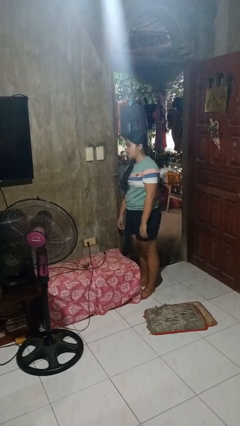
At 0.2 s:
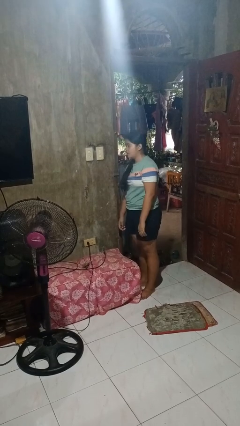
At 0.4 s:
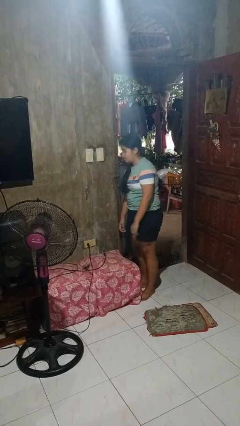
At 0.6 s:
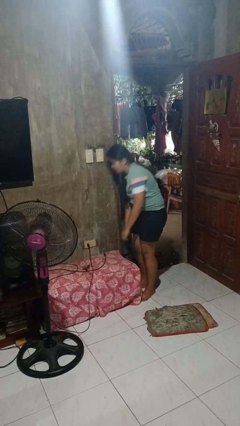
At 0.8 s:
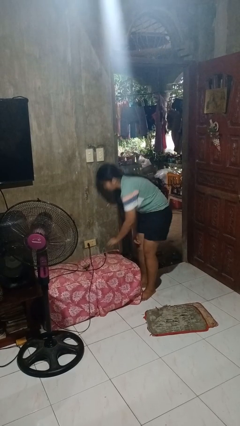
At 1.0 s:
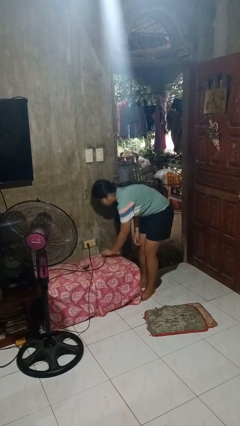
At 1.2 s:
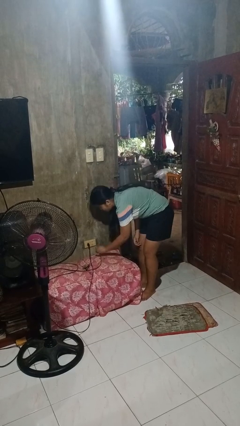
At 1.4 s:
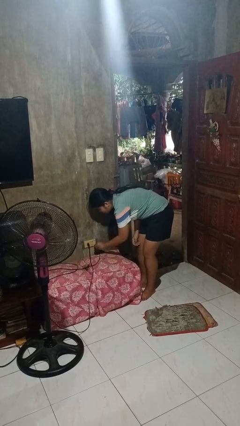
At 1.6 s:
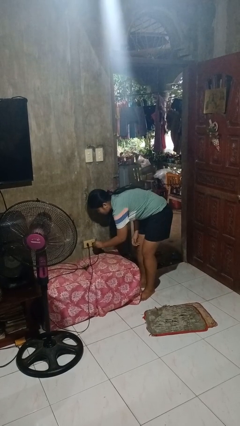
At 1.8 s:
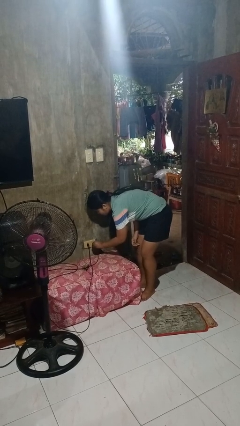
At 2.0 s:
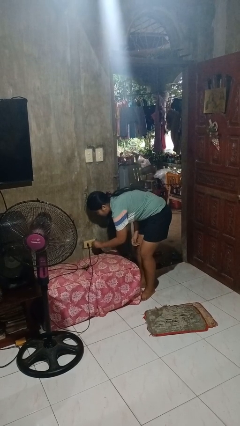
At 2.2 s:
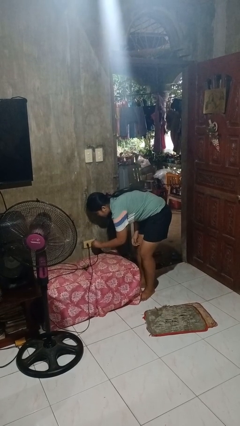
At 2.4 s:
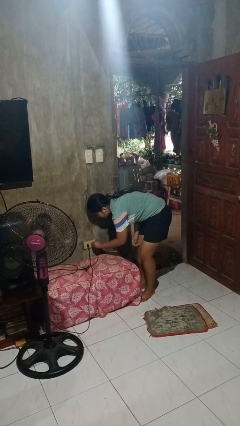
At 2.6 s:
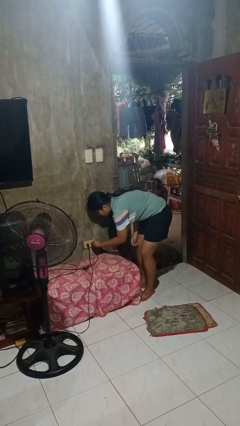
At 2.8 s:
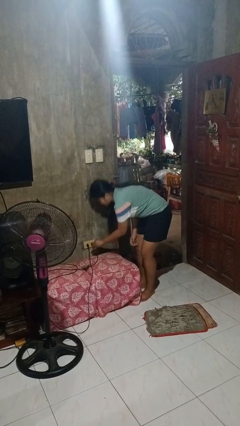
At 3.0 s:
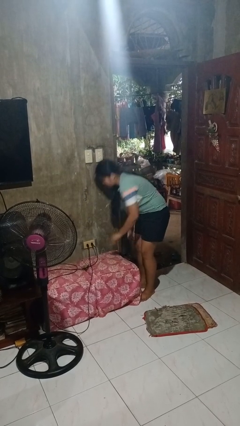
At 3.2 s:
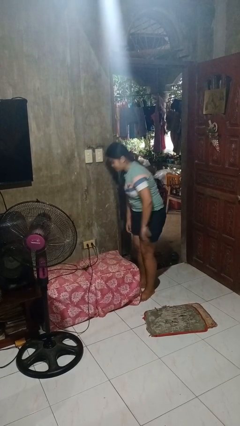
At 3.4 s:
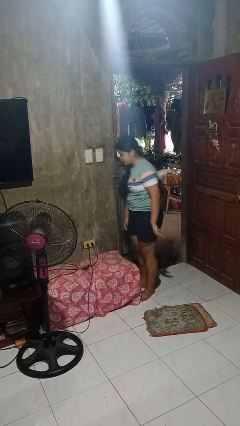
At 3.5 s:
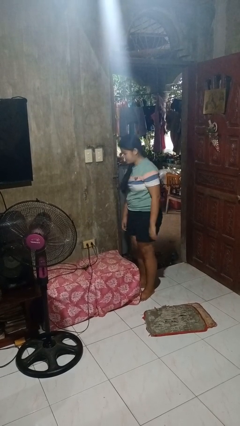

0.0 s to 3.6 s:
person plugs into electrical socket

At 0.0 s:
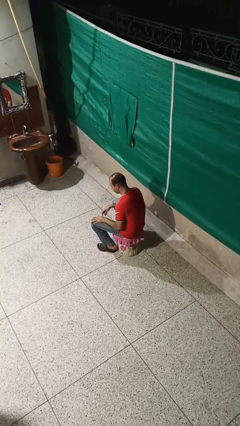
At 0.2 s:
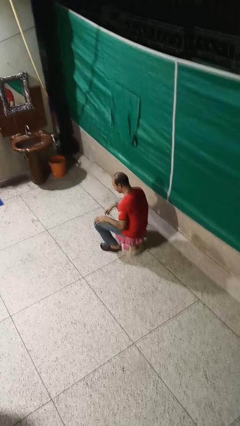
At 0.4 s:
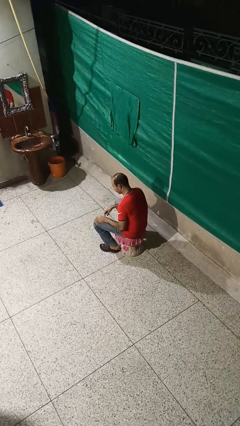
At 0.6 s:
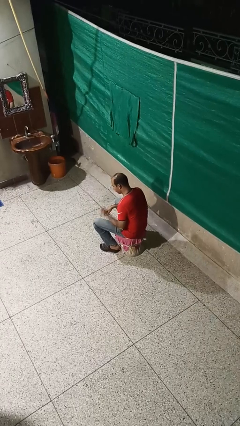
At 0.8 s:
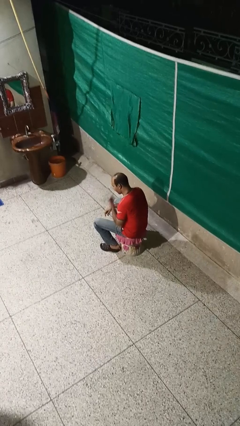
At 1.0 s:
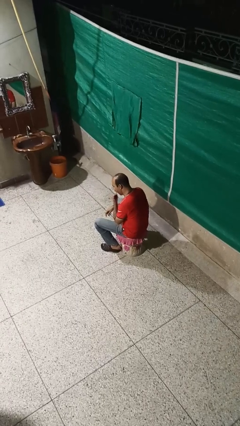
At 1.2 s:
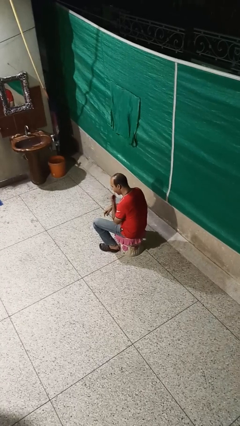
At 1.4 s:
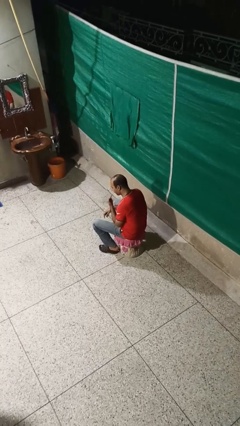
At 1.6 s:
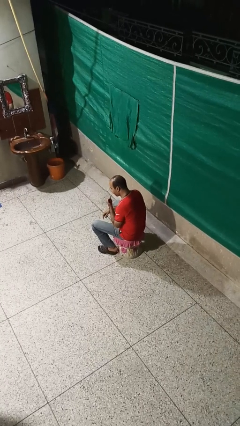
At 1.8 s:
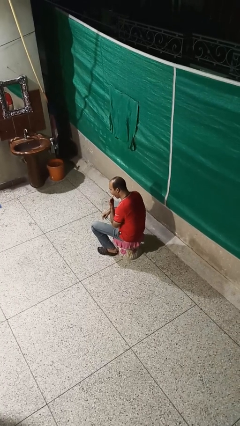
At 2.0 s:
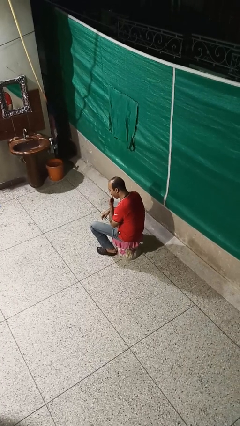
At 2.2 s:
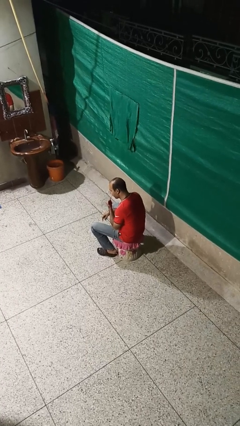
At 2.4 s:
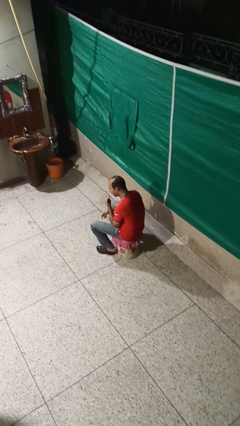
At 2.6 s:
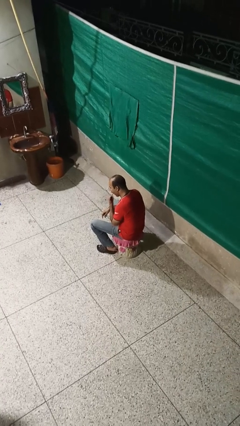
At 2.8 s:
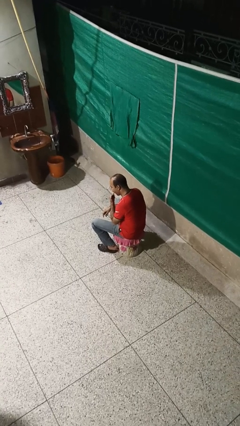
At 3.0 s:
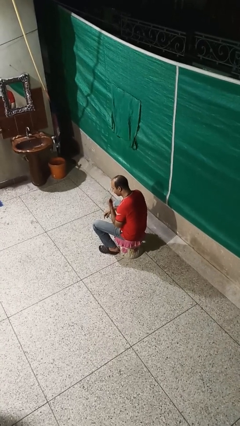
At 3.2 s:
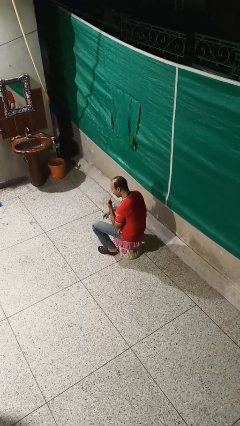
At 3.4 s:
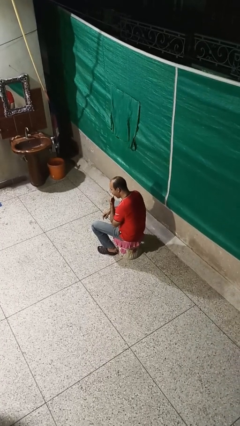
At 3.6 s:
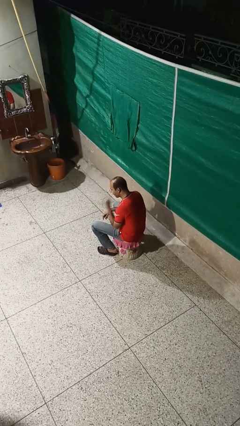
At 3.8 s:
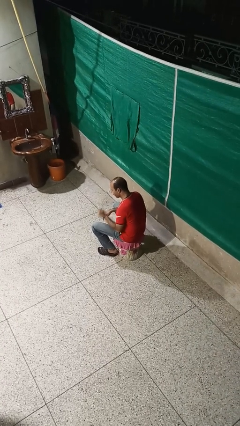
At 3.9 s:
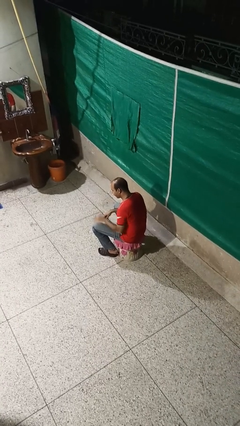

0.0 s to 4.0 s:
person licks fingers

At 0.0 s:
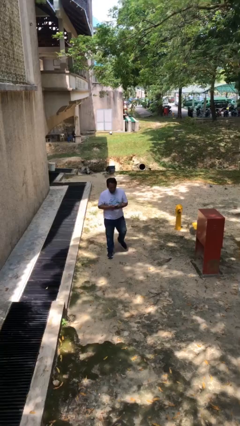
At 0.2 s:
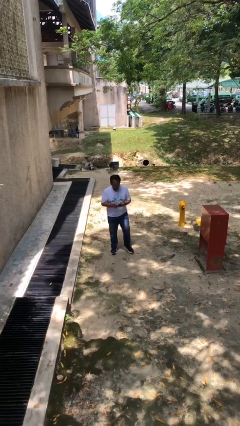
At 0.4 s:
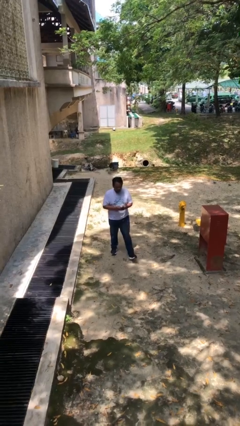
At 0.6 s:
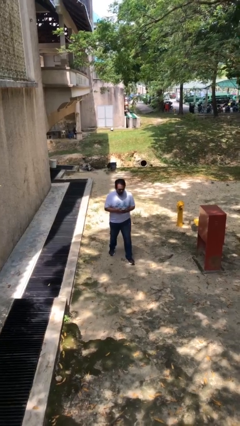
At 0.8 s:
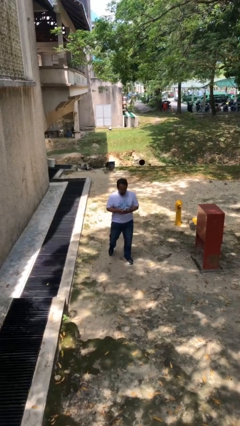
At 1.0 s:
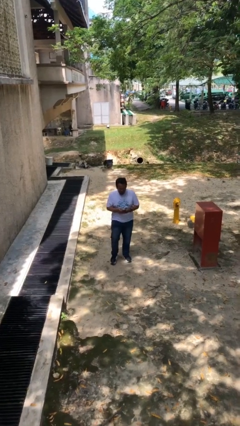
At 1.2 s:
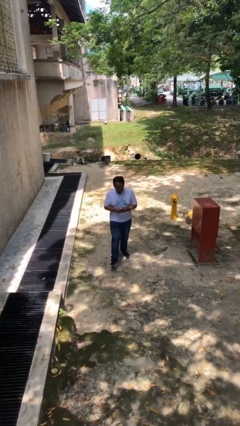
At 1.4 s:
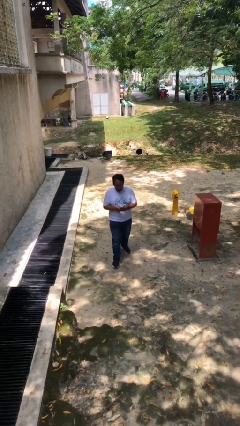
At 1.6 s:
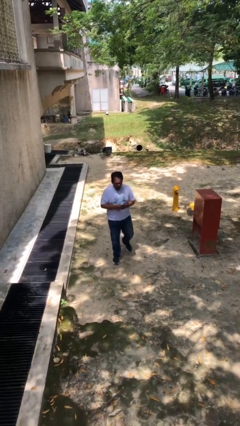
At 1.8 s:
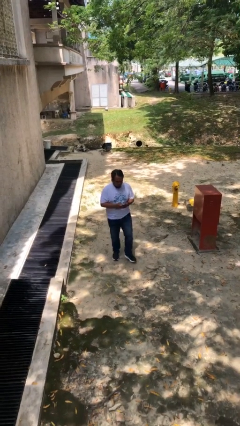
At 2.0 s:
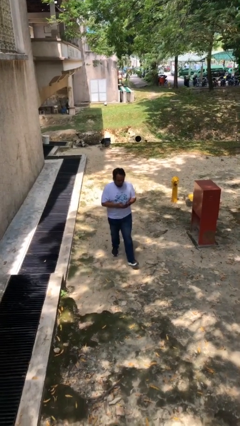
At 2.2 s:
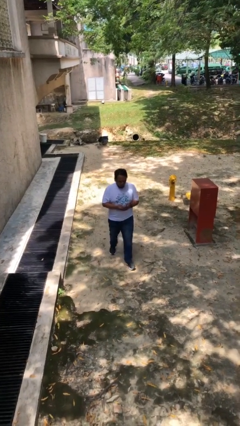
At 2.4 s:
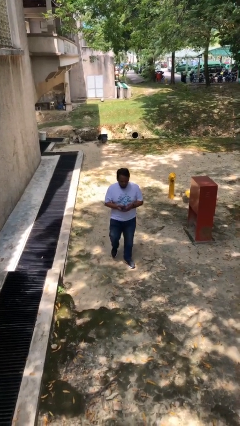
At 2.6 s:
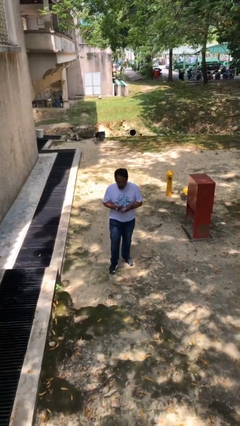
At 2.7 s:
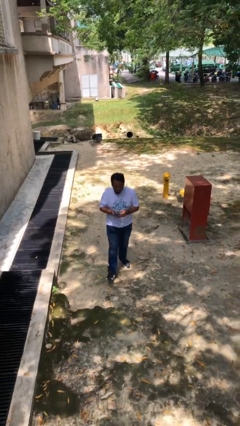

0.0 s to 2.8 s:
person texts on phone

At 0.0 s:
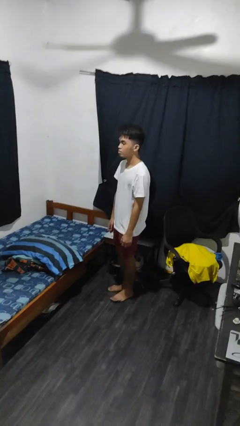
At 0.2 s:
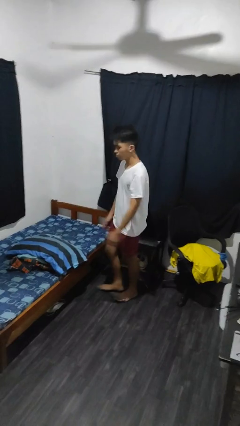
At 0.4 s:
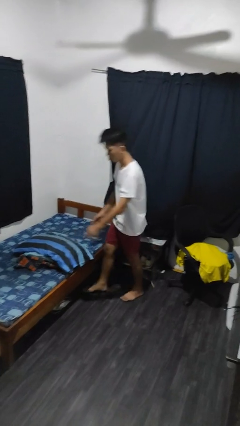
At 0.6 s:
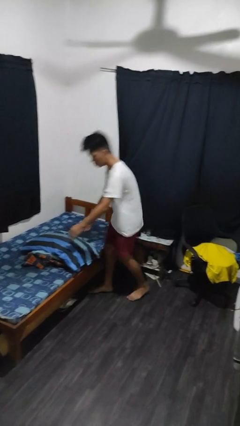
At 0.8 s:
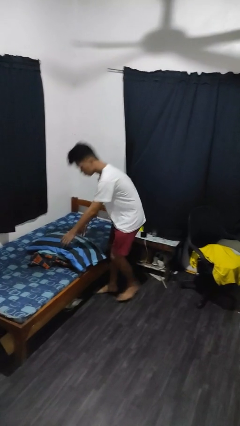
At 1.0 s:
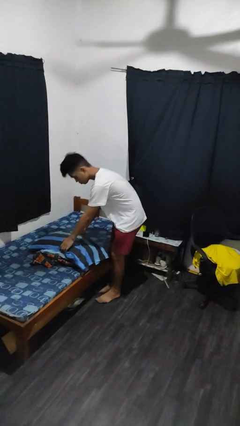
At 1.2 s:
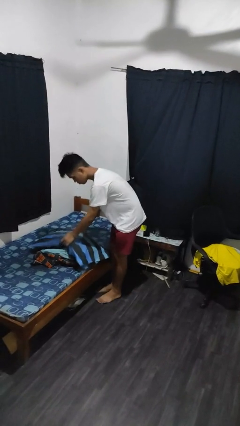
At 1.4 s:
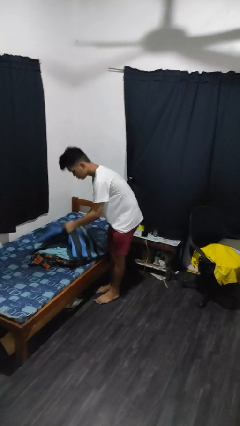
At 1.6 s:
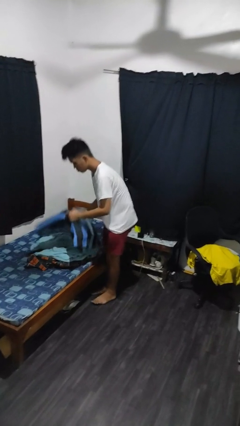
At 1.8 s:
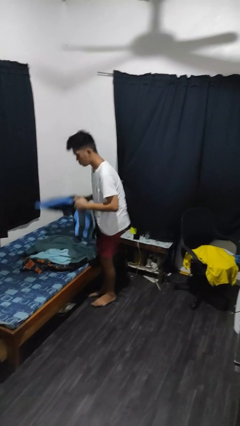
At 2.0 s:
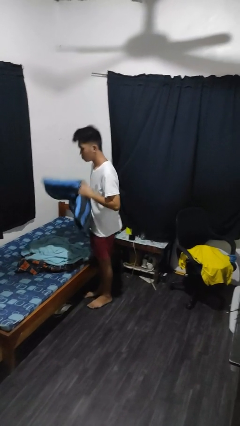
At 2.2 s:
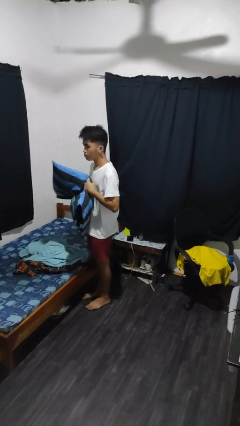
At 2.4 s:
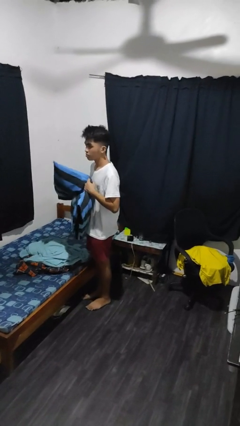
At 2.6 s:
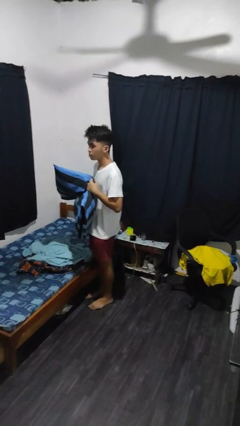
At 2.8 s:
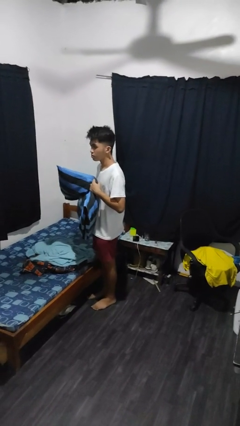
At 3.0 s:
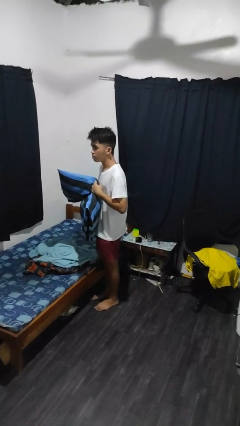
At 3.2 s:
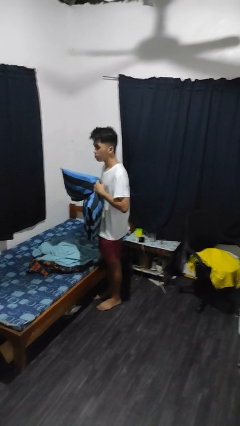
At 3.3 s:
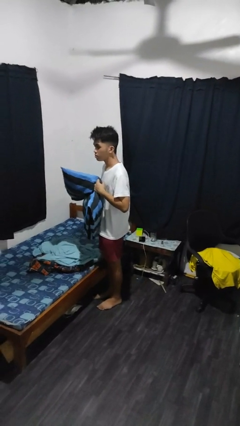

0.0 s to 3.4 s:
person picks up object from bed

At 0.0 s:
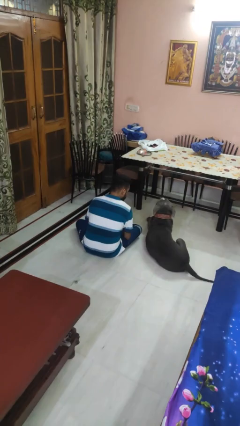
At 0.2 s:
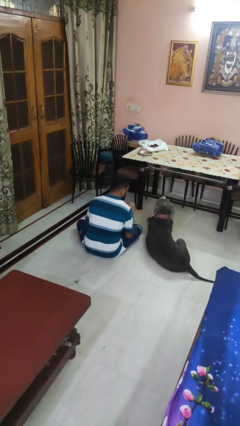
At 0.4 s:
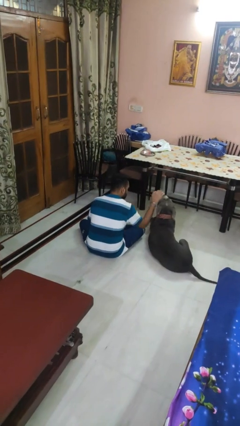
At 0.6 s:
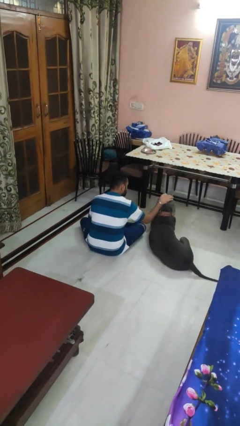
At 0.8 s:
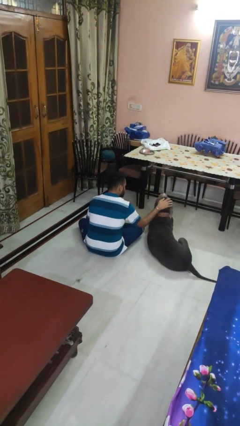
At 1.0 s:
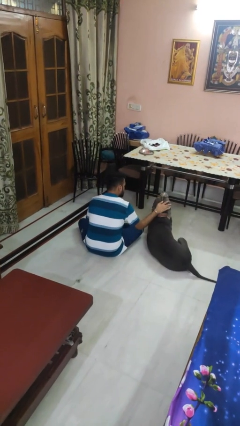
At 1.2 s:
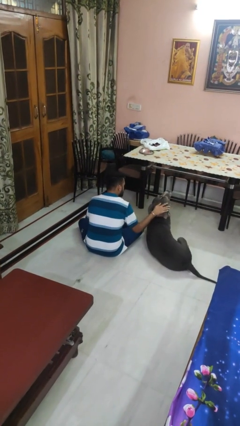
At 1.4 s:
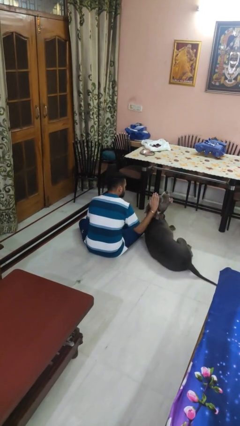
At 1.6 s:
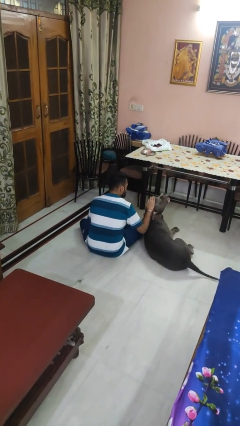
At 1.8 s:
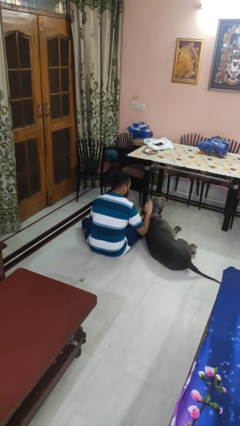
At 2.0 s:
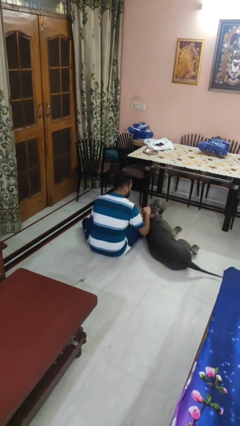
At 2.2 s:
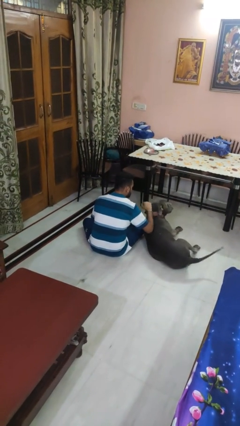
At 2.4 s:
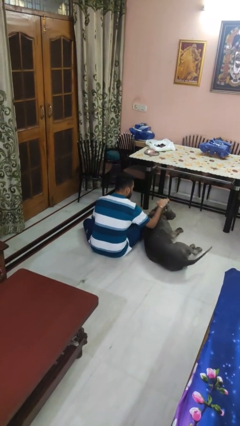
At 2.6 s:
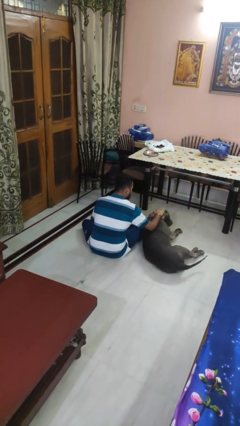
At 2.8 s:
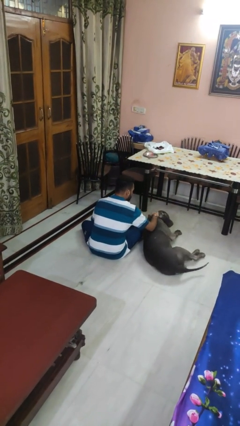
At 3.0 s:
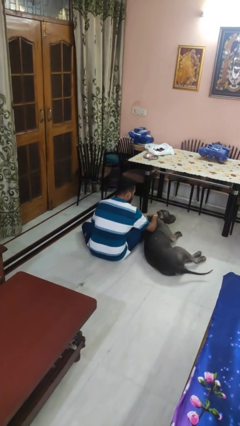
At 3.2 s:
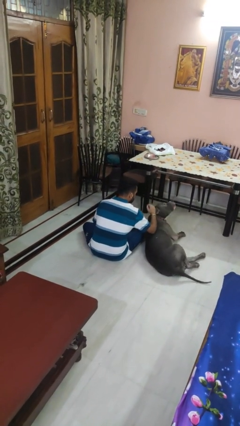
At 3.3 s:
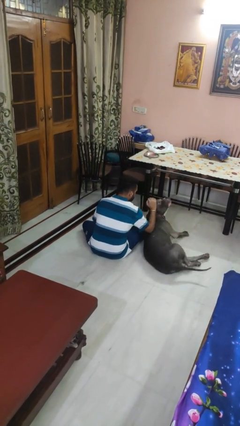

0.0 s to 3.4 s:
person pets dog

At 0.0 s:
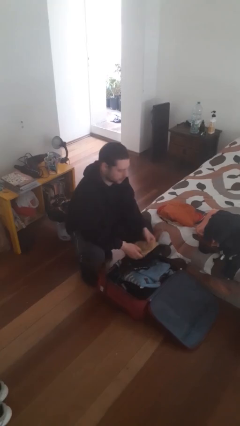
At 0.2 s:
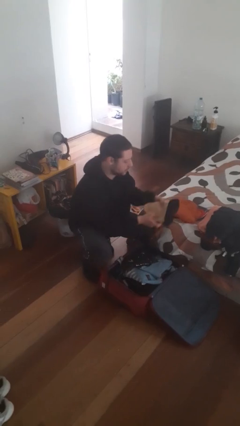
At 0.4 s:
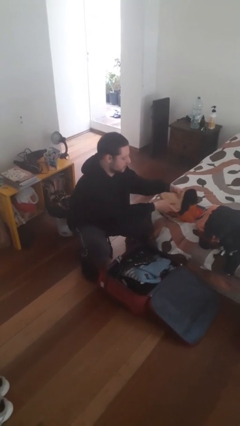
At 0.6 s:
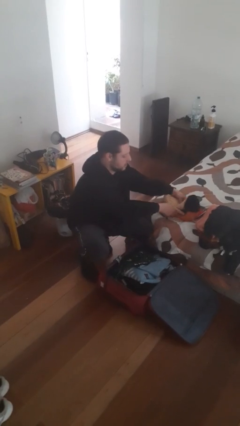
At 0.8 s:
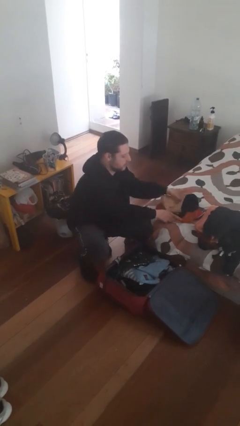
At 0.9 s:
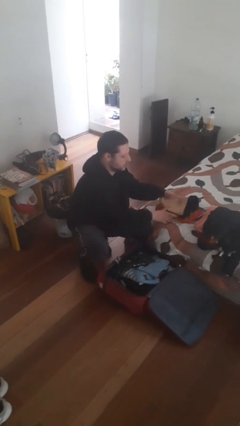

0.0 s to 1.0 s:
person unloads clothes from suitcase
